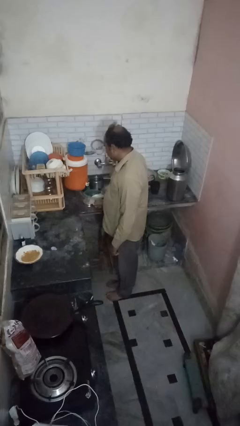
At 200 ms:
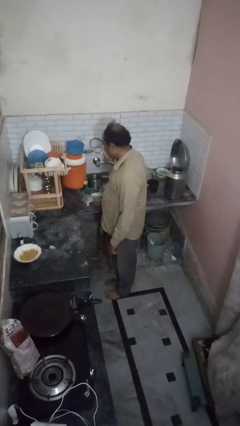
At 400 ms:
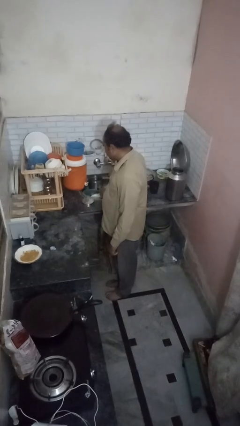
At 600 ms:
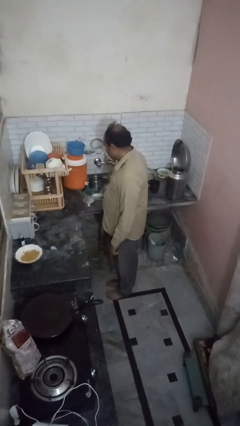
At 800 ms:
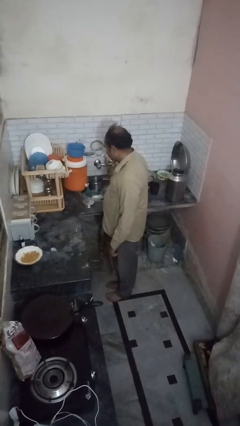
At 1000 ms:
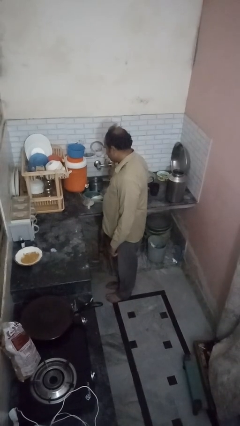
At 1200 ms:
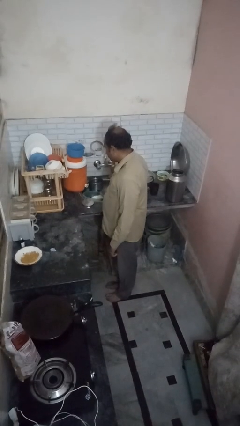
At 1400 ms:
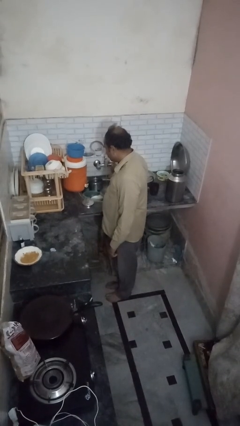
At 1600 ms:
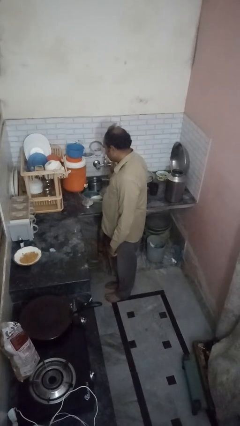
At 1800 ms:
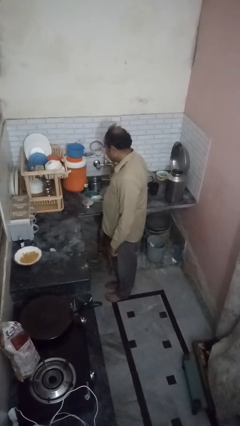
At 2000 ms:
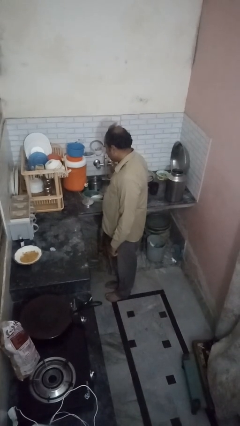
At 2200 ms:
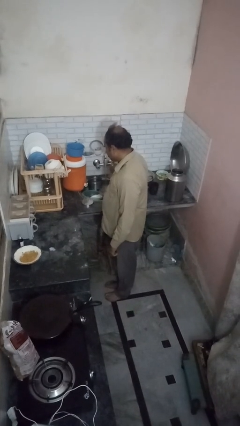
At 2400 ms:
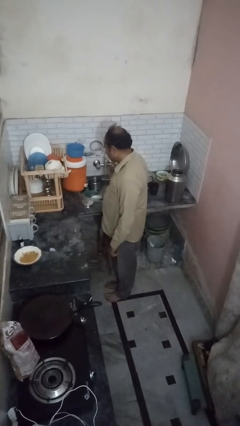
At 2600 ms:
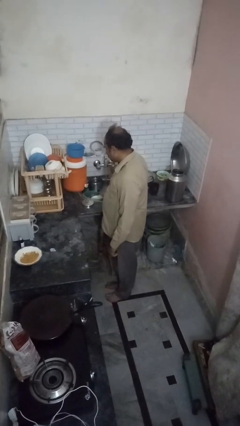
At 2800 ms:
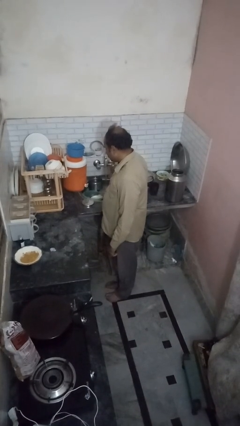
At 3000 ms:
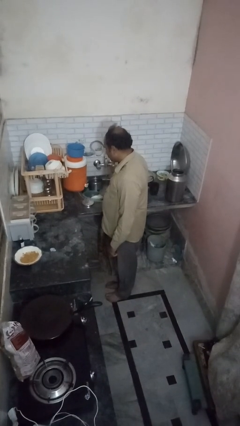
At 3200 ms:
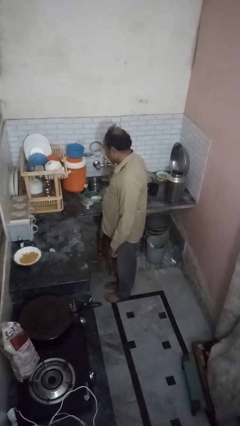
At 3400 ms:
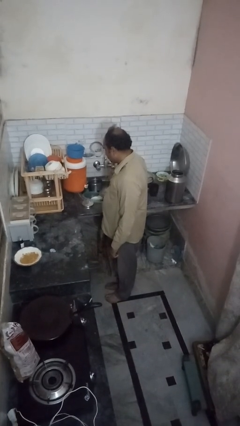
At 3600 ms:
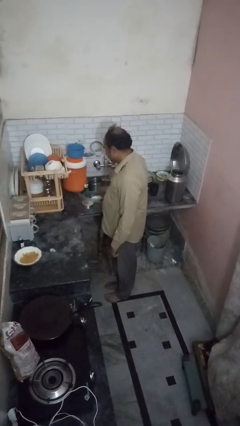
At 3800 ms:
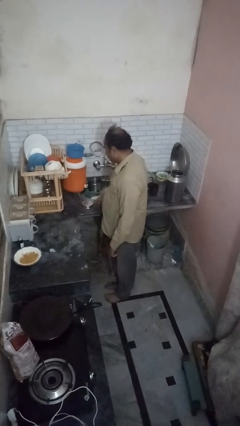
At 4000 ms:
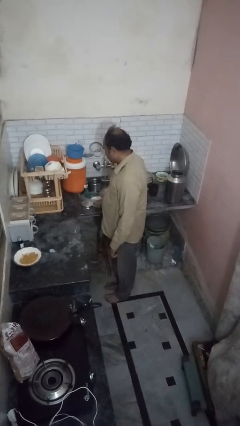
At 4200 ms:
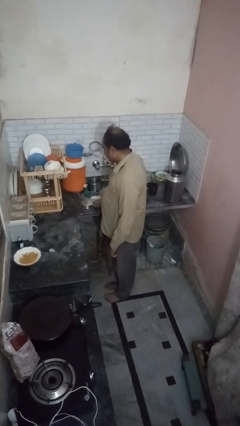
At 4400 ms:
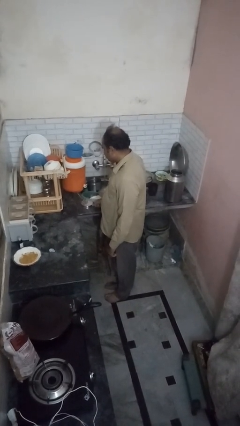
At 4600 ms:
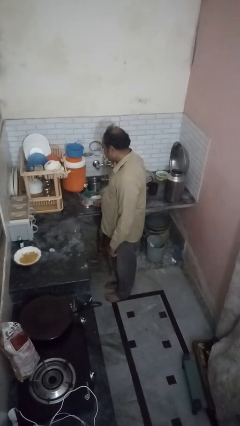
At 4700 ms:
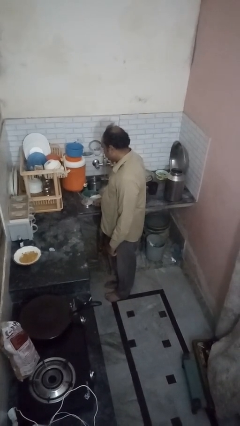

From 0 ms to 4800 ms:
person opens dishwasher

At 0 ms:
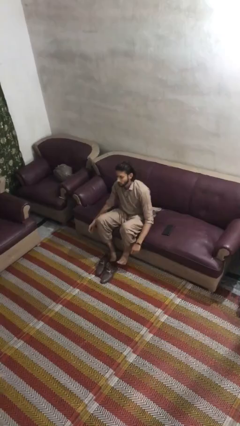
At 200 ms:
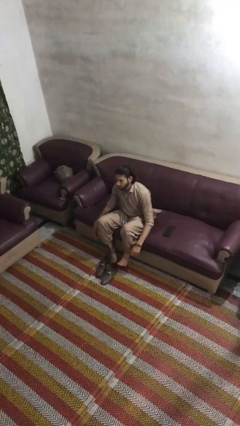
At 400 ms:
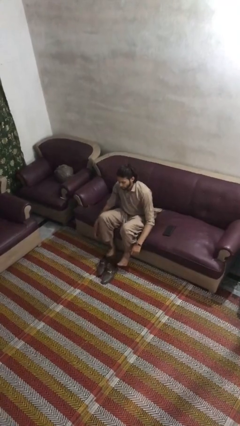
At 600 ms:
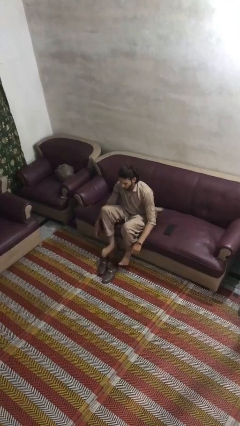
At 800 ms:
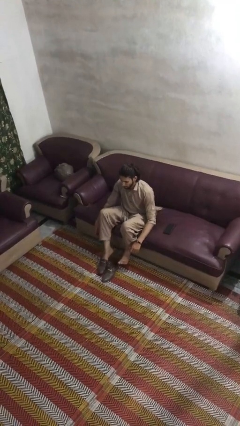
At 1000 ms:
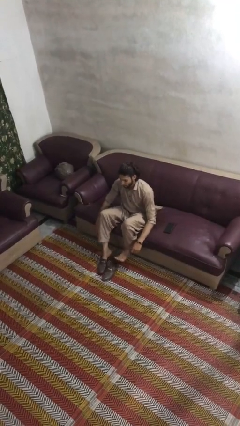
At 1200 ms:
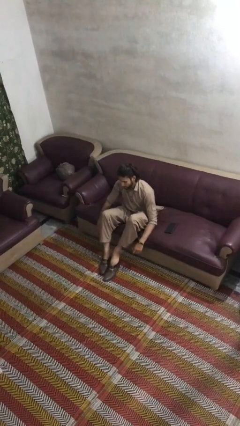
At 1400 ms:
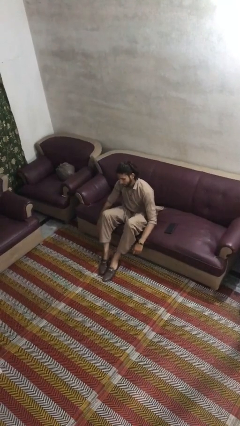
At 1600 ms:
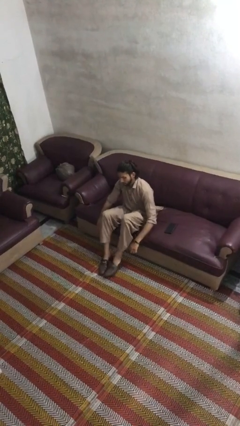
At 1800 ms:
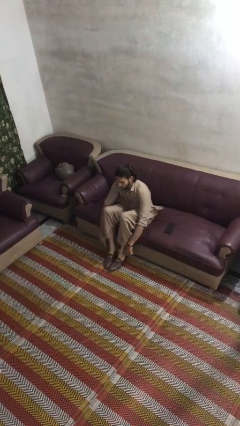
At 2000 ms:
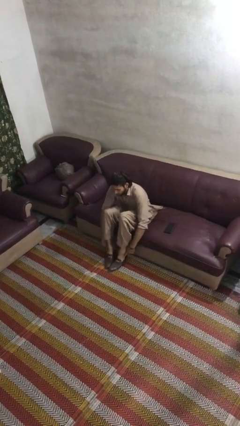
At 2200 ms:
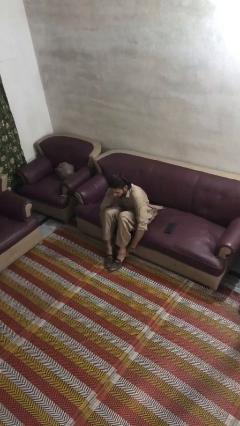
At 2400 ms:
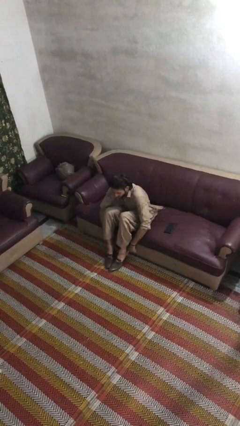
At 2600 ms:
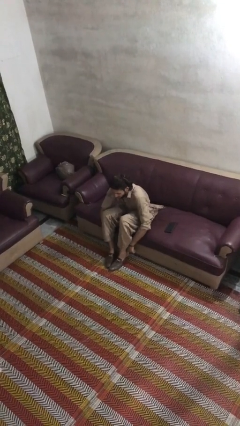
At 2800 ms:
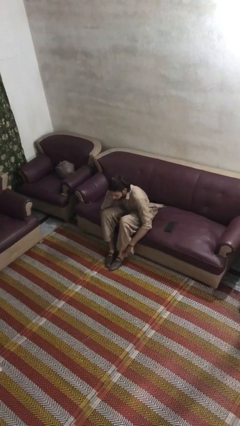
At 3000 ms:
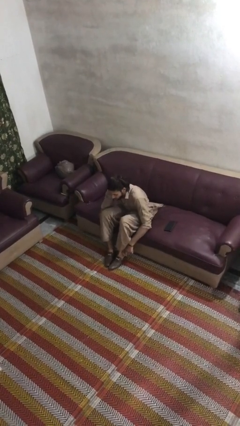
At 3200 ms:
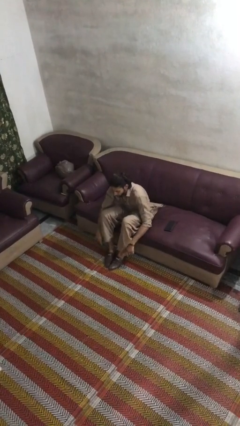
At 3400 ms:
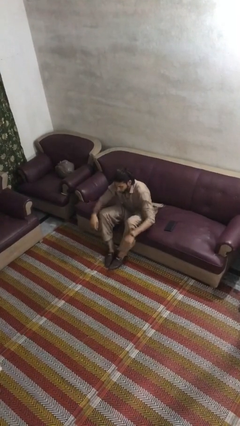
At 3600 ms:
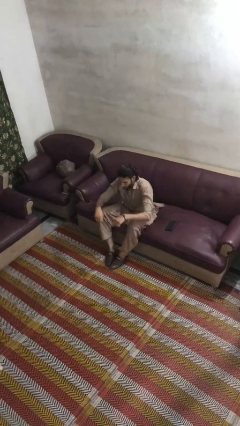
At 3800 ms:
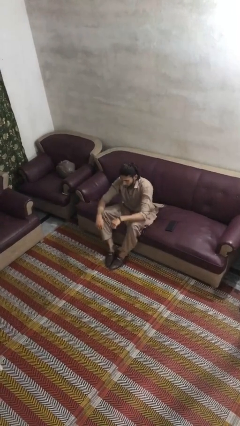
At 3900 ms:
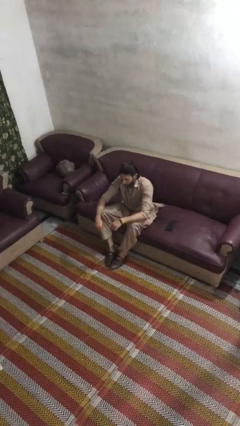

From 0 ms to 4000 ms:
person puts on shoes

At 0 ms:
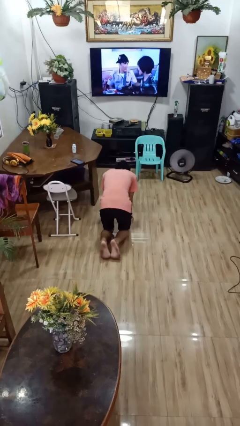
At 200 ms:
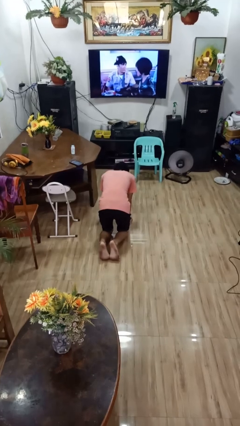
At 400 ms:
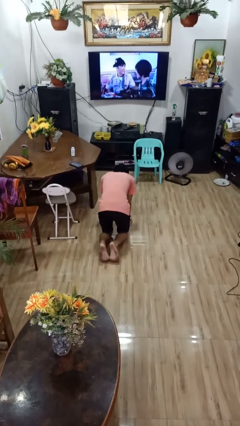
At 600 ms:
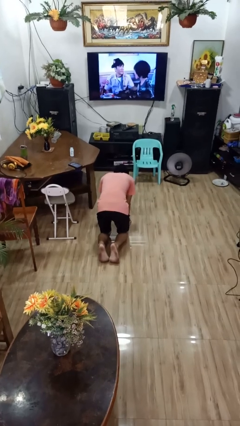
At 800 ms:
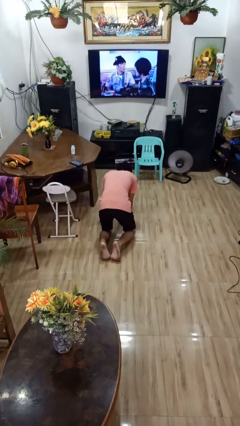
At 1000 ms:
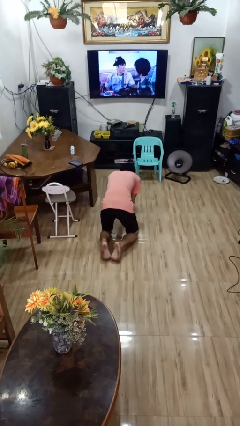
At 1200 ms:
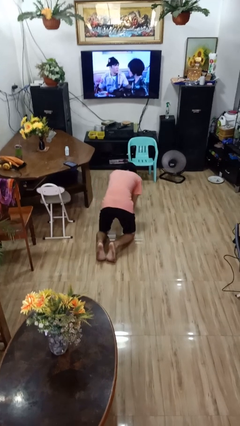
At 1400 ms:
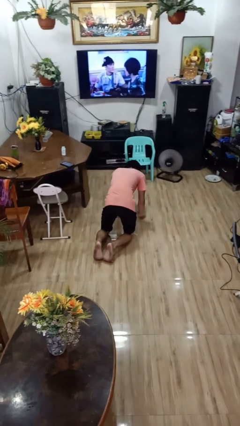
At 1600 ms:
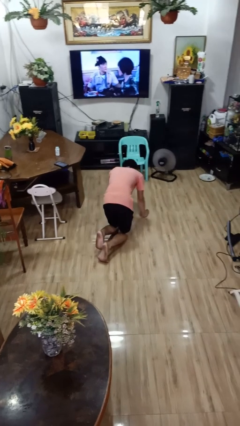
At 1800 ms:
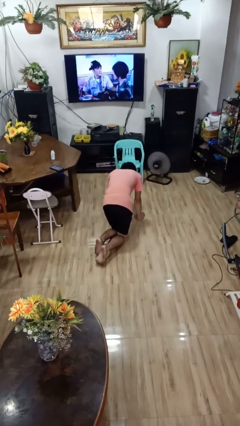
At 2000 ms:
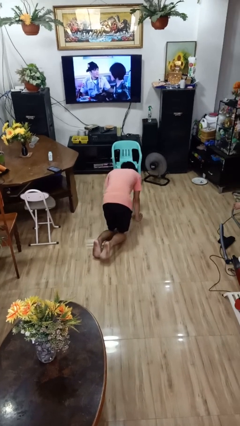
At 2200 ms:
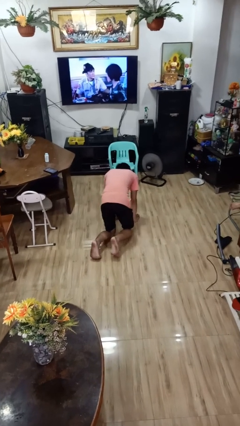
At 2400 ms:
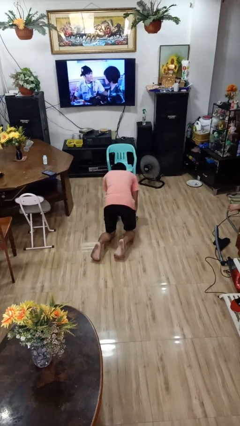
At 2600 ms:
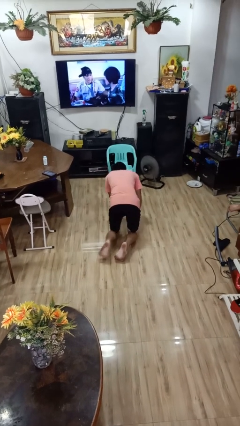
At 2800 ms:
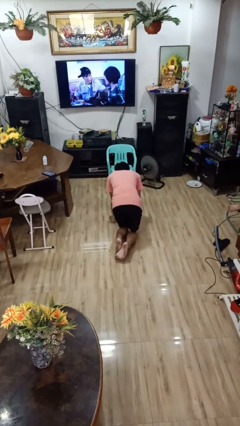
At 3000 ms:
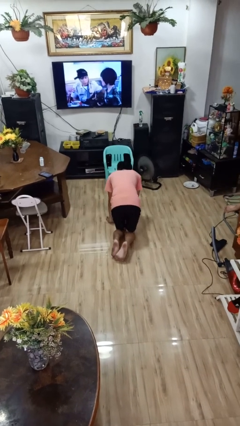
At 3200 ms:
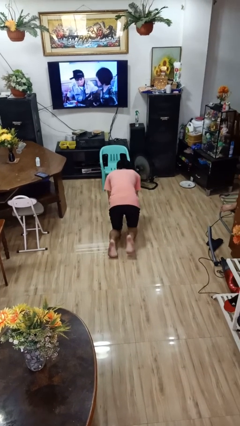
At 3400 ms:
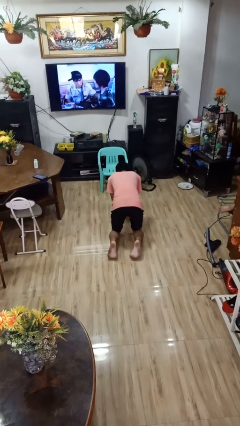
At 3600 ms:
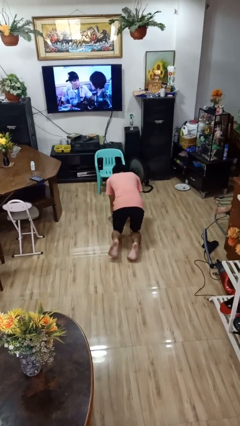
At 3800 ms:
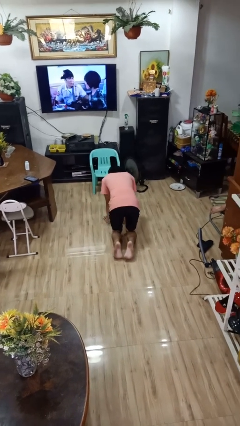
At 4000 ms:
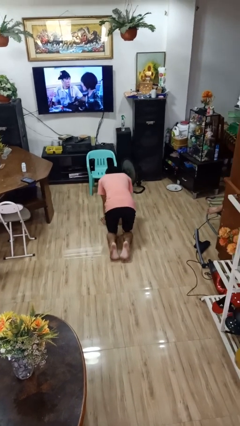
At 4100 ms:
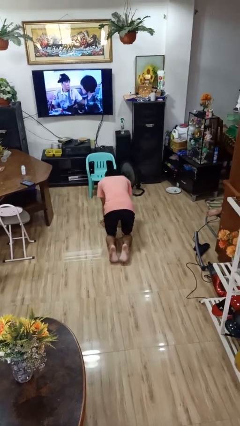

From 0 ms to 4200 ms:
person crawls

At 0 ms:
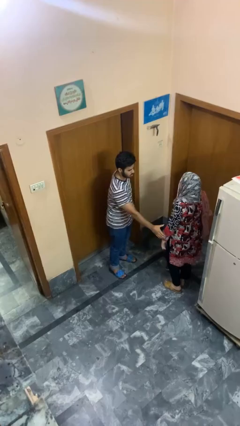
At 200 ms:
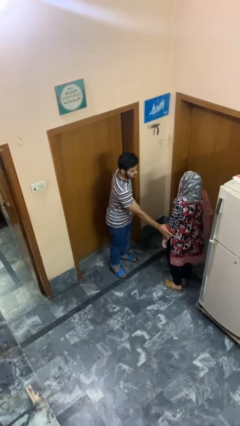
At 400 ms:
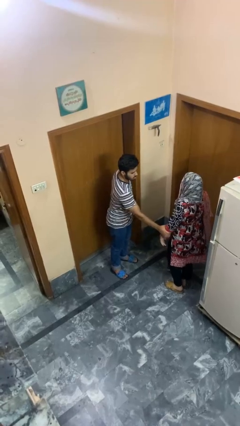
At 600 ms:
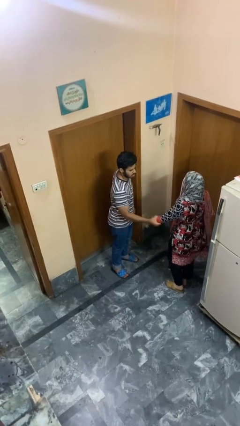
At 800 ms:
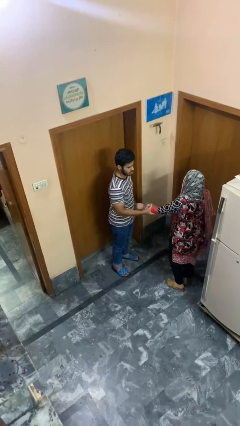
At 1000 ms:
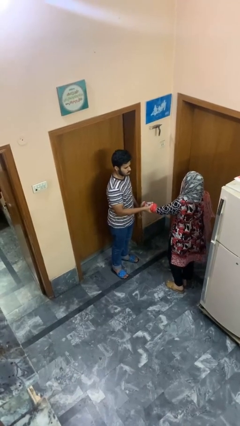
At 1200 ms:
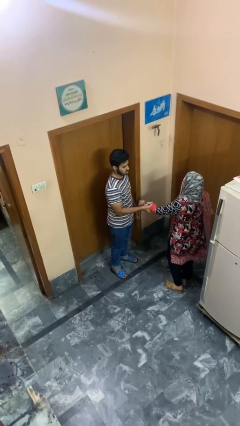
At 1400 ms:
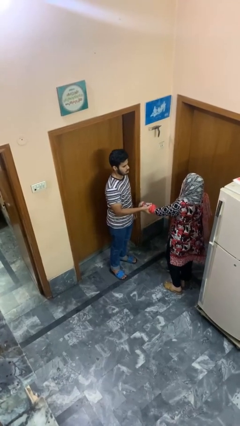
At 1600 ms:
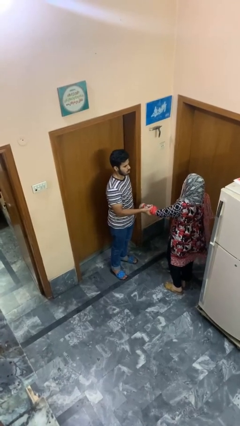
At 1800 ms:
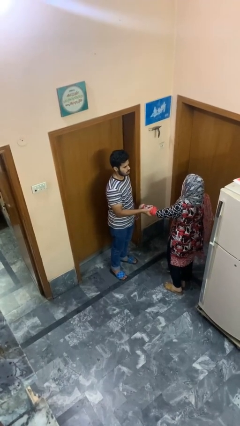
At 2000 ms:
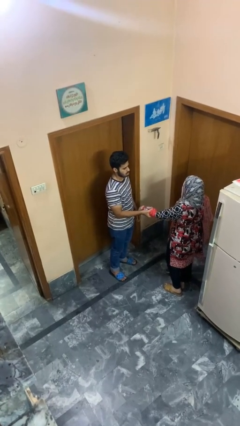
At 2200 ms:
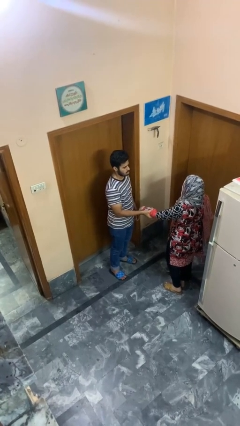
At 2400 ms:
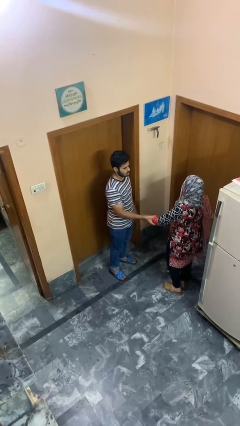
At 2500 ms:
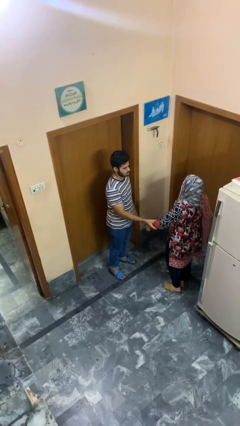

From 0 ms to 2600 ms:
person grabs person by forearm

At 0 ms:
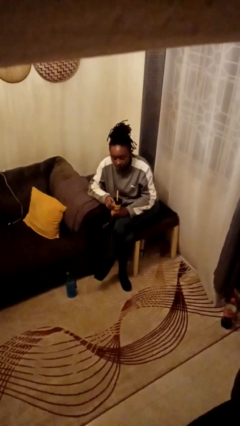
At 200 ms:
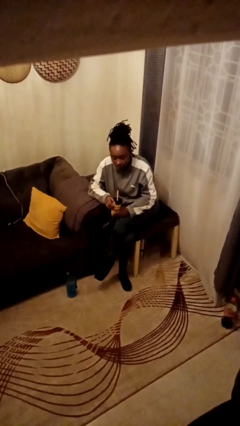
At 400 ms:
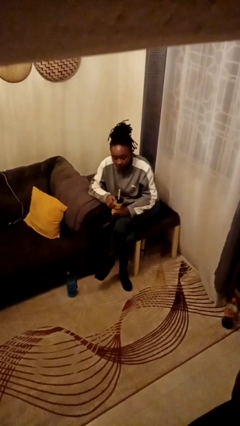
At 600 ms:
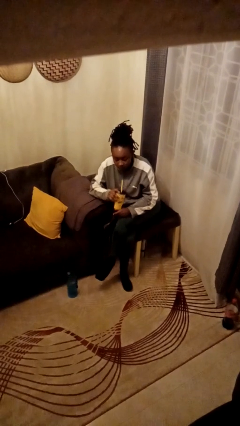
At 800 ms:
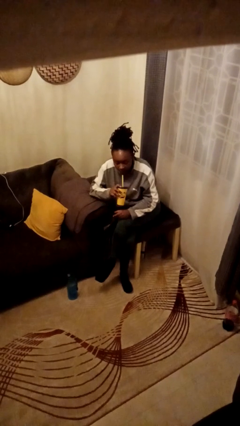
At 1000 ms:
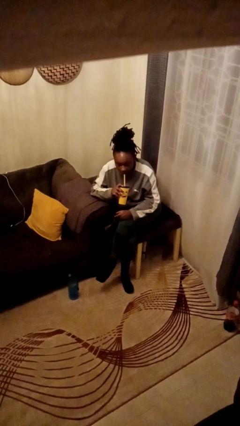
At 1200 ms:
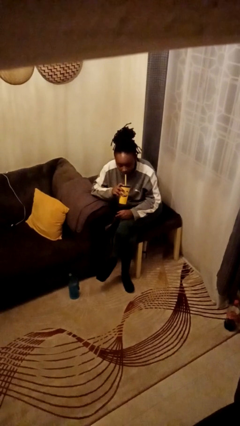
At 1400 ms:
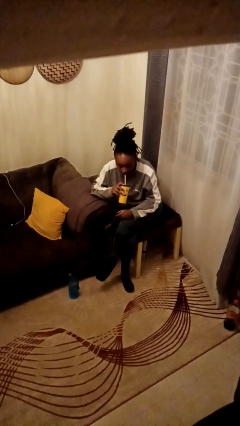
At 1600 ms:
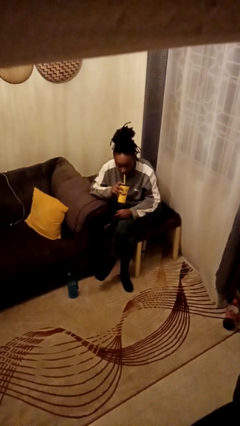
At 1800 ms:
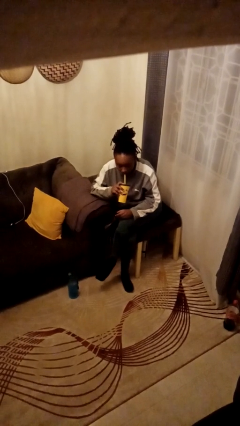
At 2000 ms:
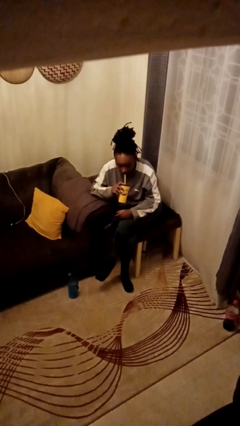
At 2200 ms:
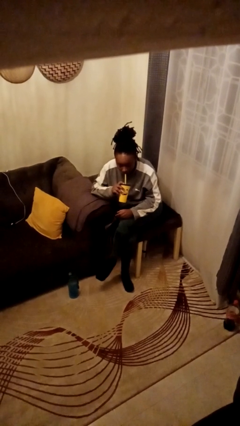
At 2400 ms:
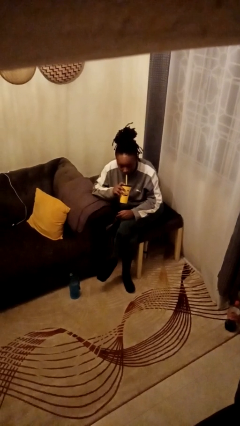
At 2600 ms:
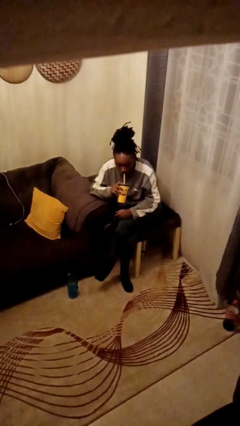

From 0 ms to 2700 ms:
person drinks from straw
